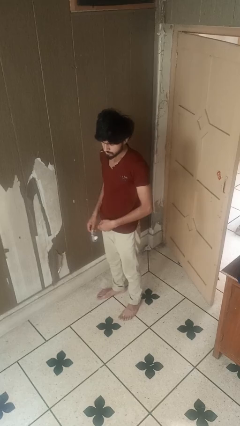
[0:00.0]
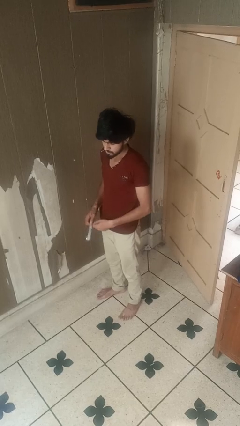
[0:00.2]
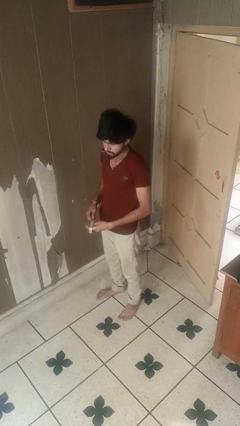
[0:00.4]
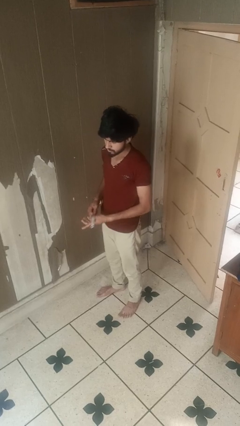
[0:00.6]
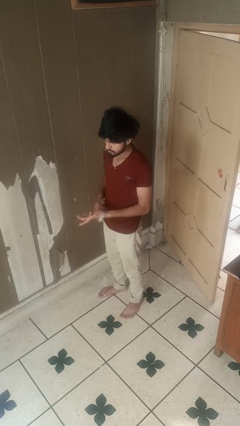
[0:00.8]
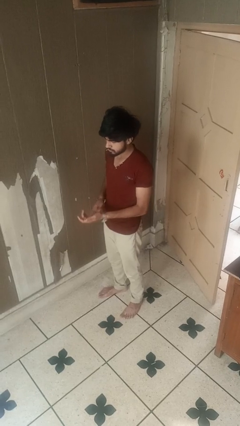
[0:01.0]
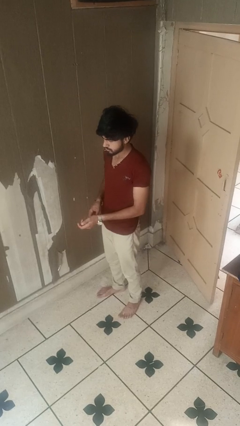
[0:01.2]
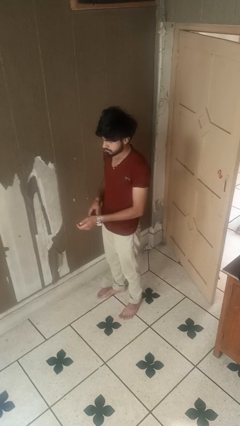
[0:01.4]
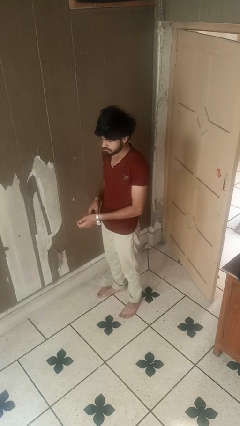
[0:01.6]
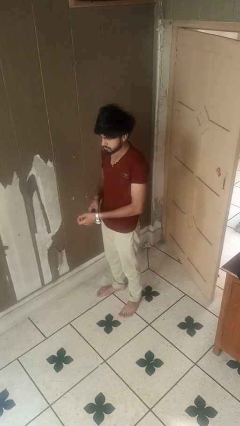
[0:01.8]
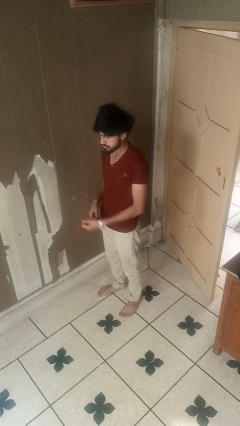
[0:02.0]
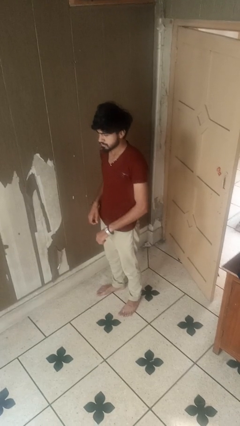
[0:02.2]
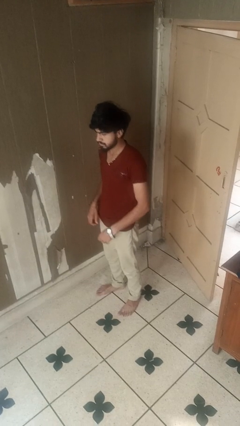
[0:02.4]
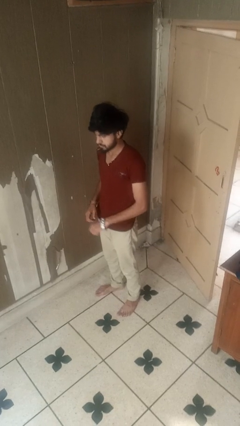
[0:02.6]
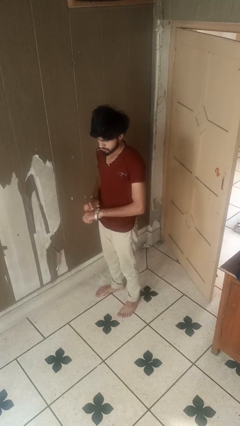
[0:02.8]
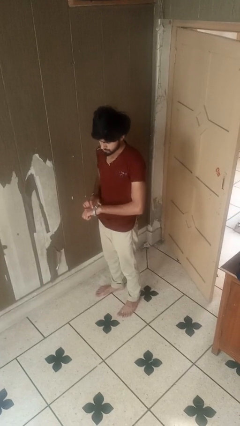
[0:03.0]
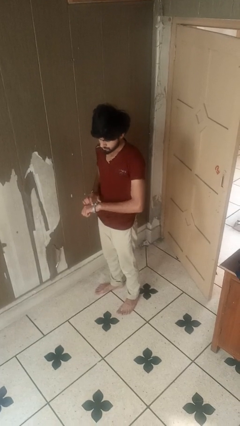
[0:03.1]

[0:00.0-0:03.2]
person puts on wristwatch

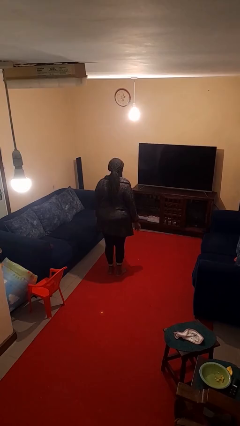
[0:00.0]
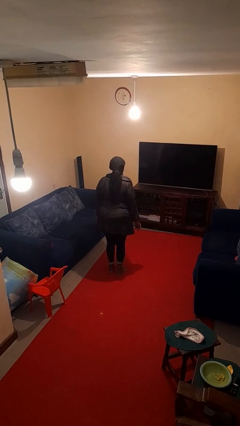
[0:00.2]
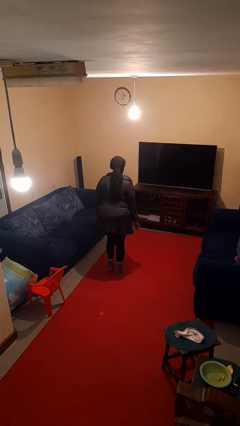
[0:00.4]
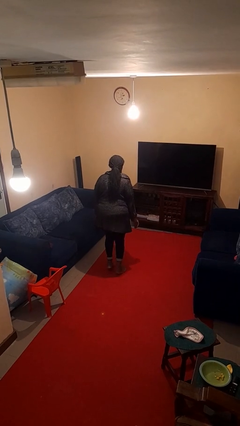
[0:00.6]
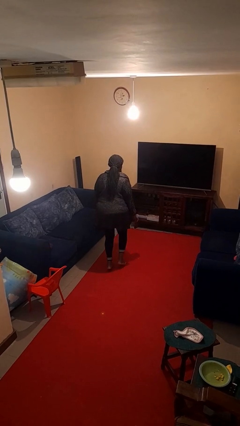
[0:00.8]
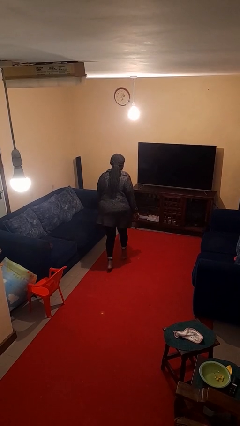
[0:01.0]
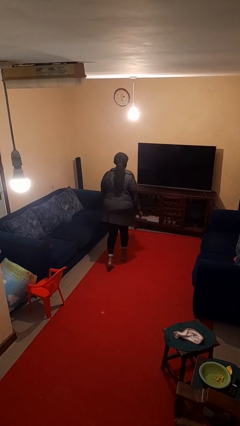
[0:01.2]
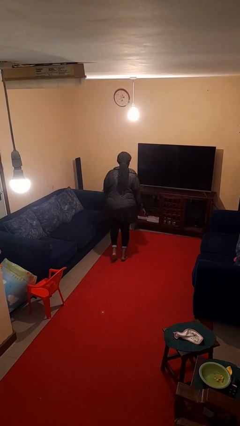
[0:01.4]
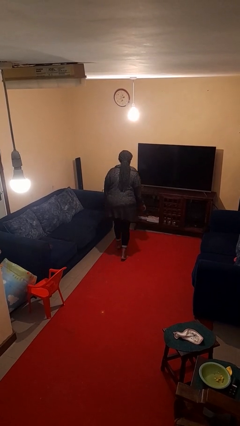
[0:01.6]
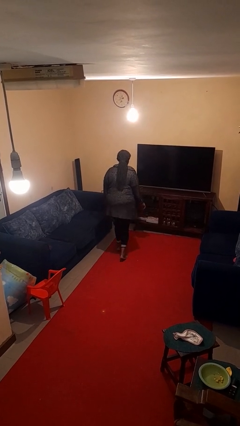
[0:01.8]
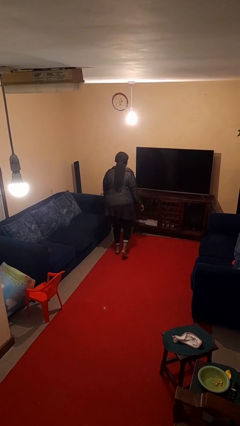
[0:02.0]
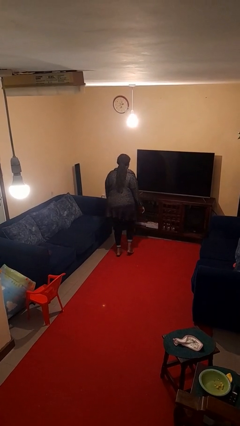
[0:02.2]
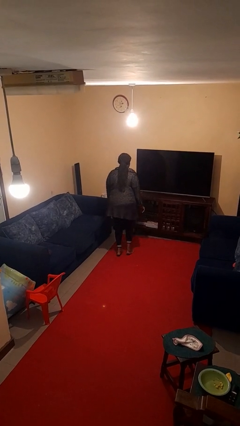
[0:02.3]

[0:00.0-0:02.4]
person walks tiptoe

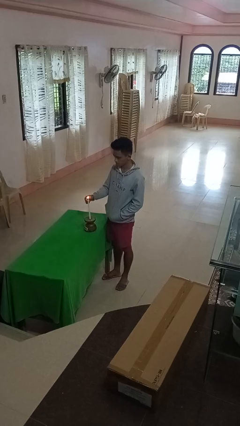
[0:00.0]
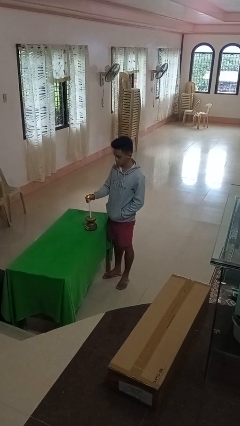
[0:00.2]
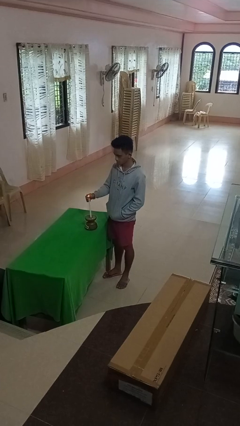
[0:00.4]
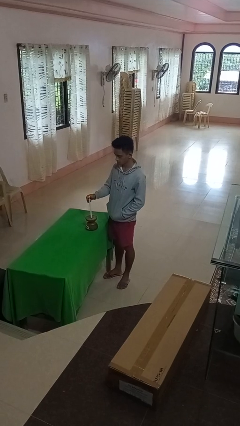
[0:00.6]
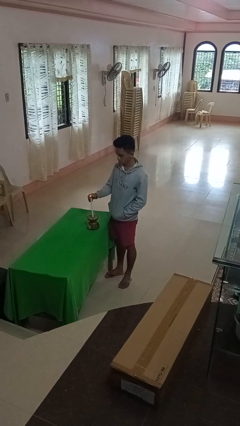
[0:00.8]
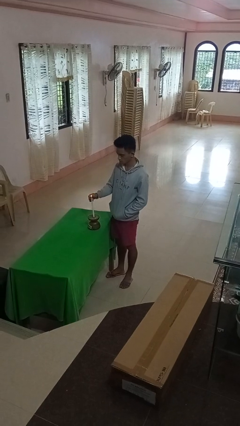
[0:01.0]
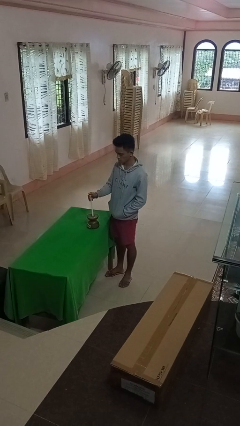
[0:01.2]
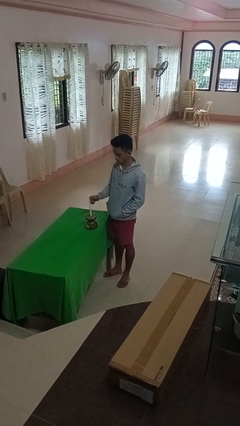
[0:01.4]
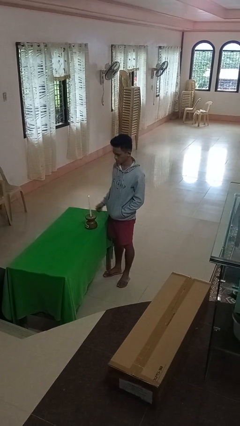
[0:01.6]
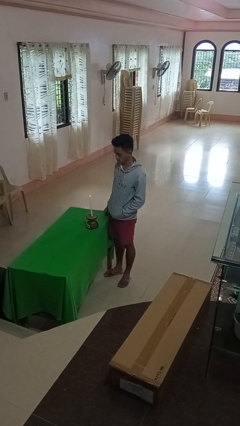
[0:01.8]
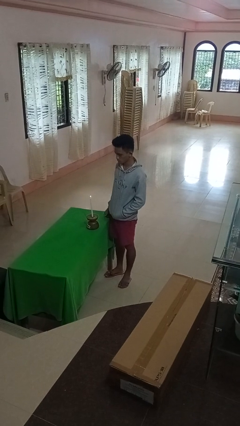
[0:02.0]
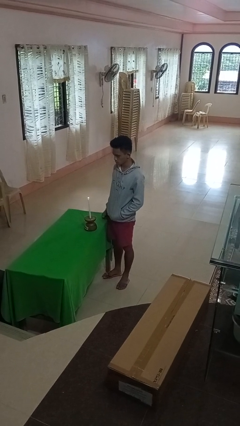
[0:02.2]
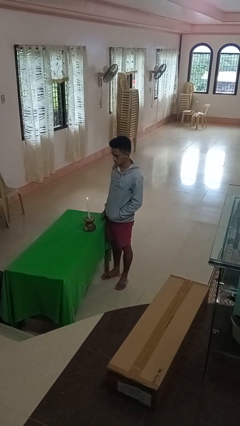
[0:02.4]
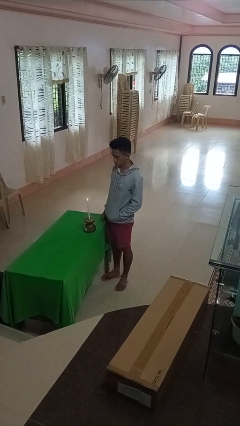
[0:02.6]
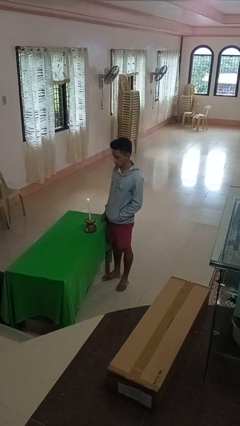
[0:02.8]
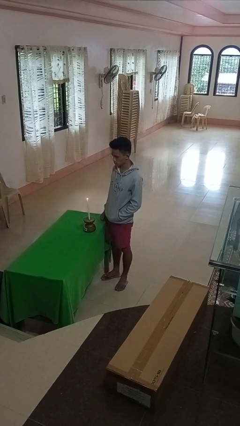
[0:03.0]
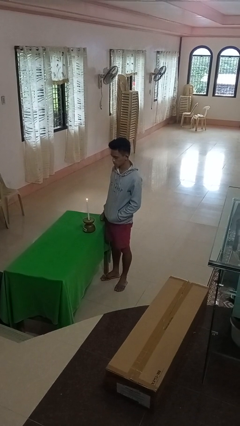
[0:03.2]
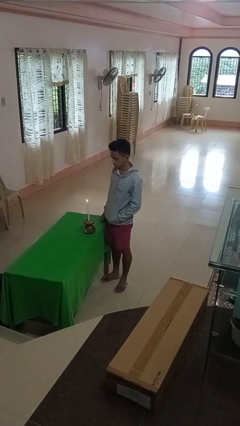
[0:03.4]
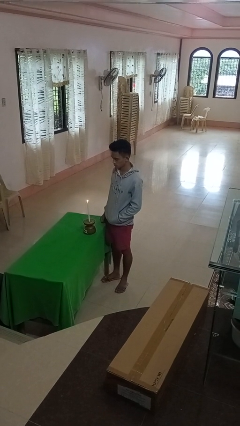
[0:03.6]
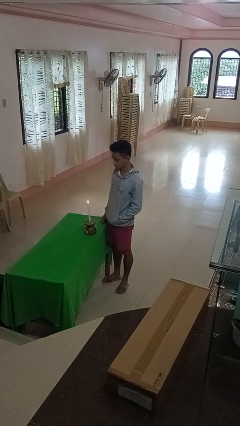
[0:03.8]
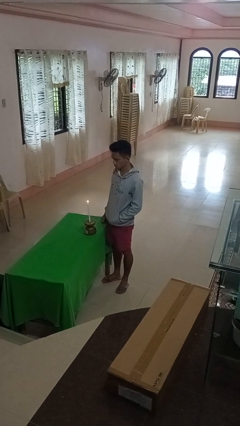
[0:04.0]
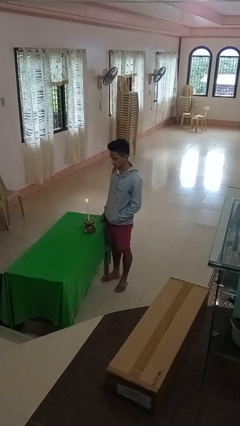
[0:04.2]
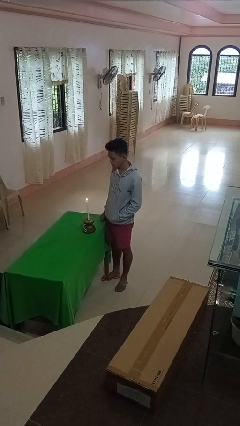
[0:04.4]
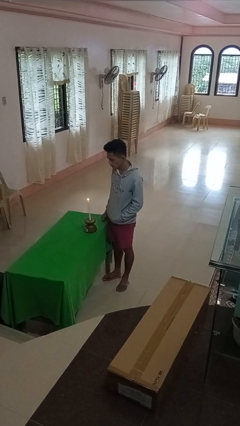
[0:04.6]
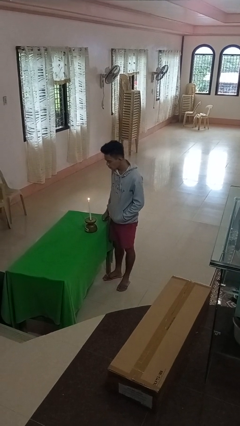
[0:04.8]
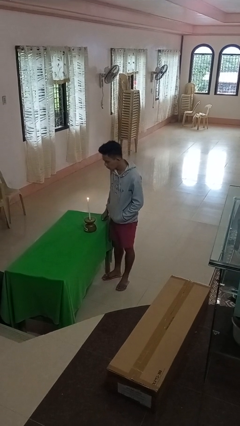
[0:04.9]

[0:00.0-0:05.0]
person lights candle

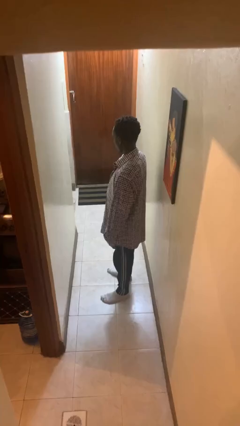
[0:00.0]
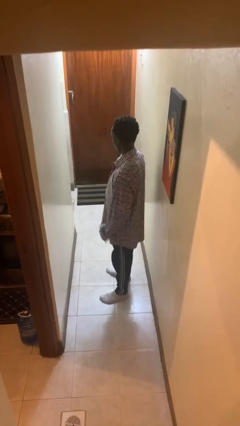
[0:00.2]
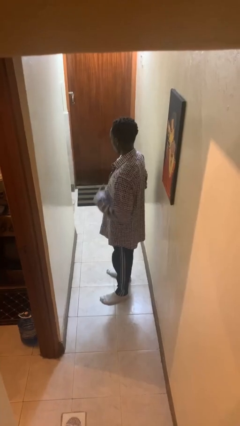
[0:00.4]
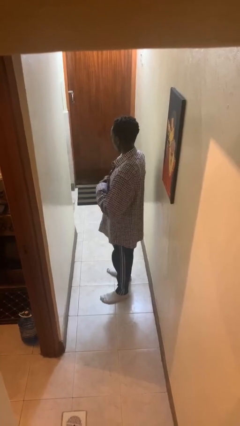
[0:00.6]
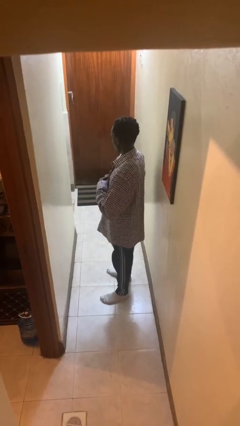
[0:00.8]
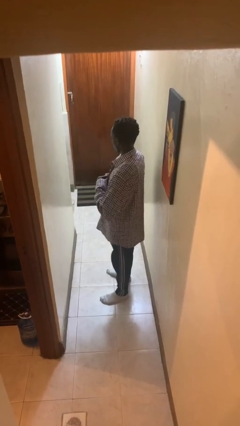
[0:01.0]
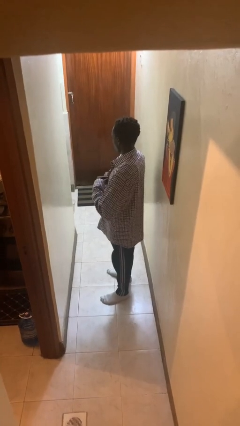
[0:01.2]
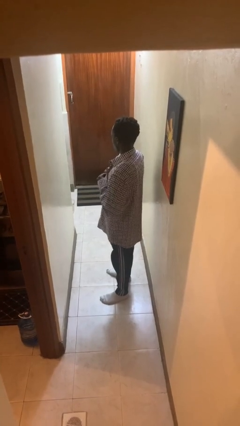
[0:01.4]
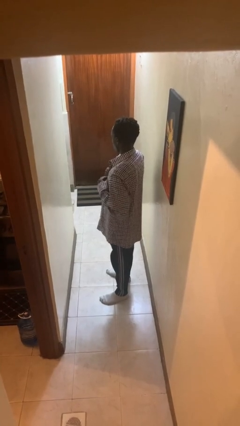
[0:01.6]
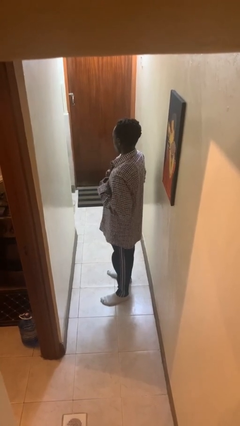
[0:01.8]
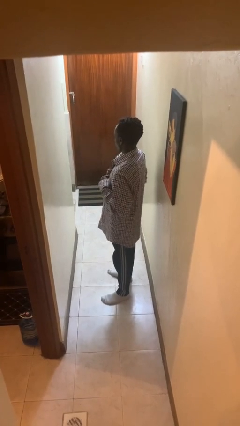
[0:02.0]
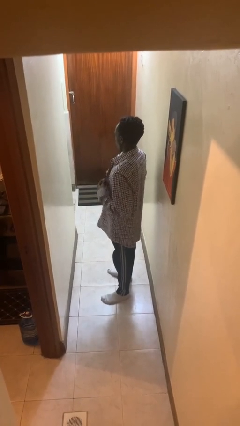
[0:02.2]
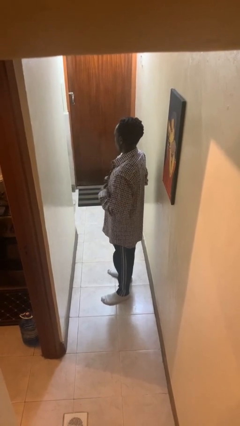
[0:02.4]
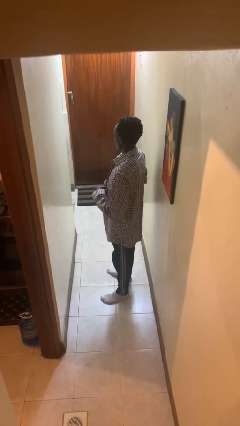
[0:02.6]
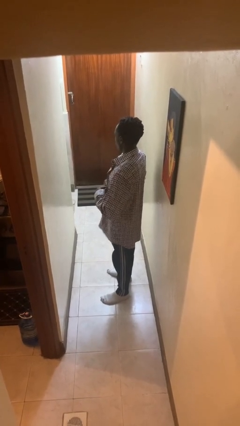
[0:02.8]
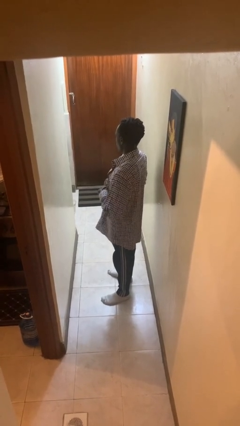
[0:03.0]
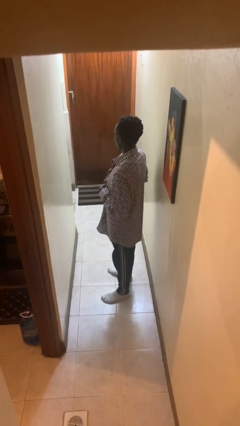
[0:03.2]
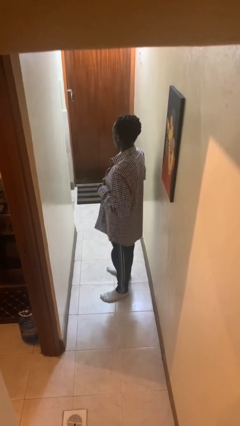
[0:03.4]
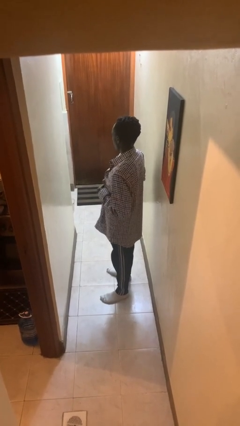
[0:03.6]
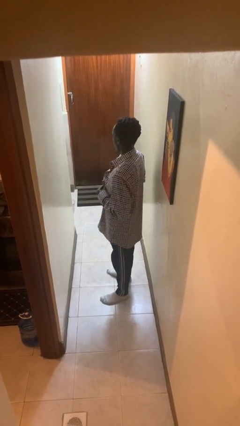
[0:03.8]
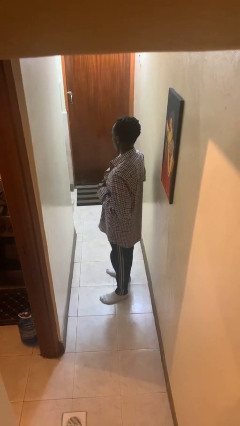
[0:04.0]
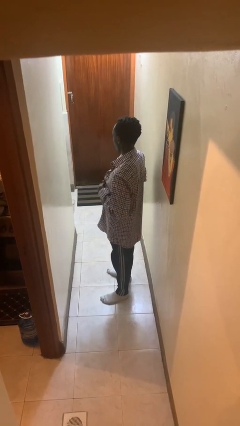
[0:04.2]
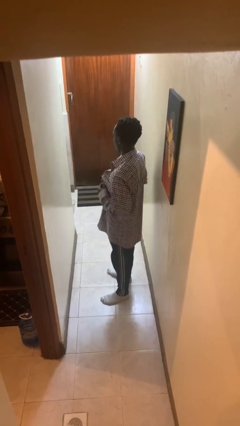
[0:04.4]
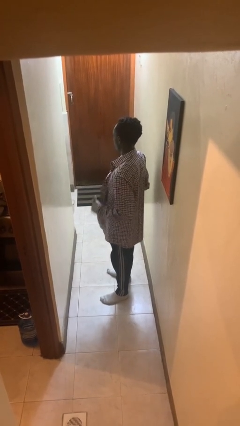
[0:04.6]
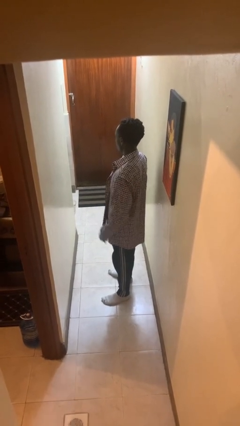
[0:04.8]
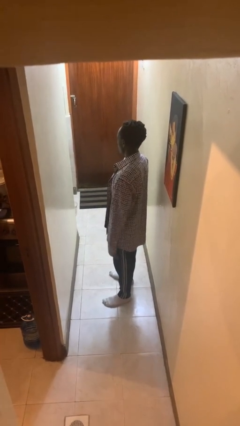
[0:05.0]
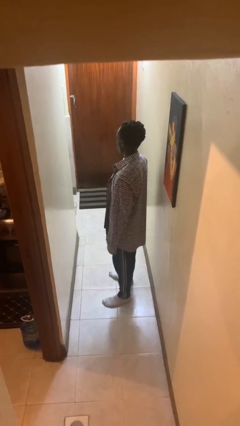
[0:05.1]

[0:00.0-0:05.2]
person unbuttons shirt

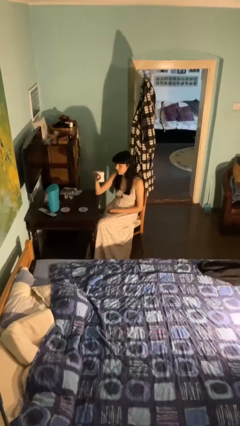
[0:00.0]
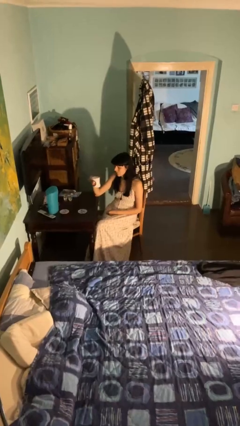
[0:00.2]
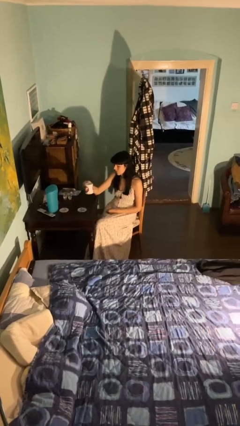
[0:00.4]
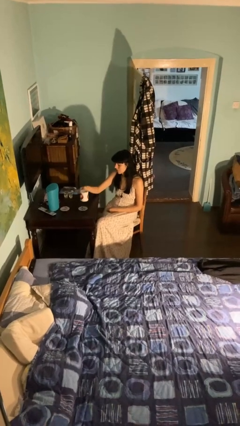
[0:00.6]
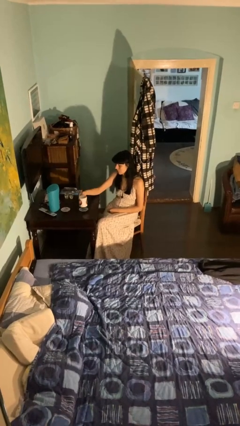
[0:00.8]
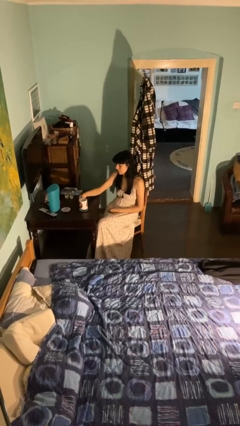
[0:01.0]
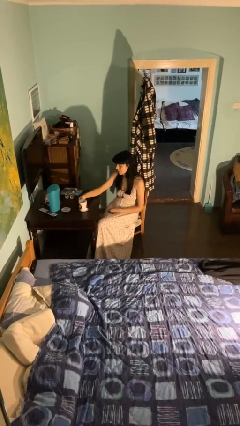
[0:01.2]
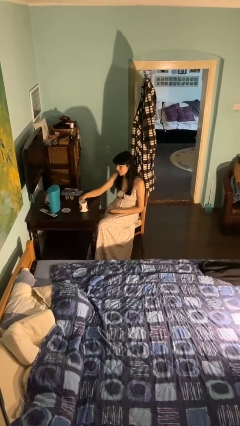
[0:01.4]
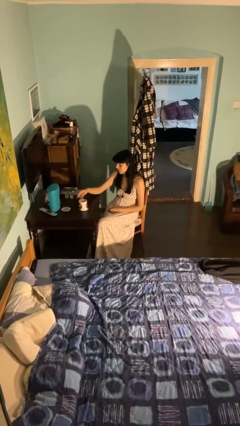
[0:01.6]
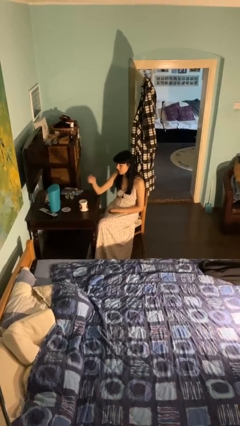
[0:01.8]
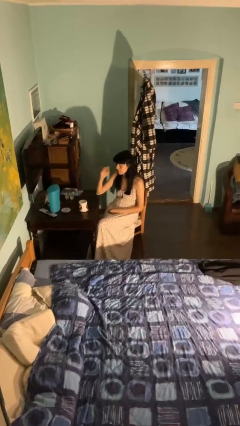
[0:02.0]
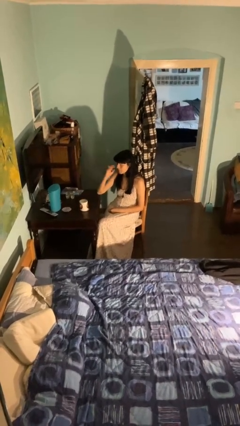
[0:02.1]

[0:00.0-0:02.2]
person puts down object on table
